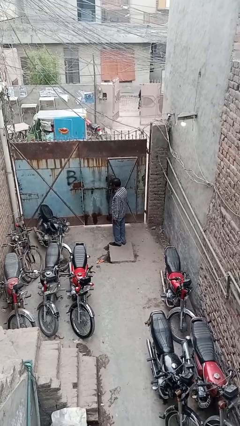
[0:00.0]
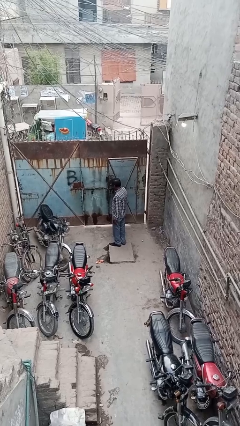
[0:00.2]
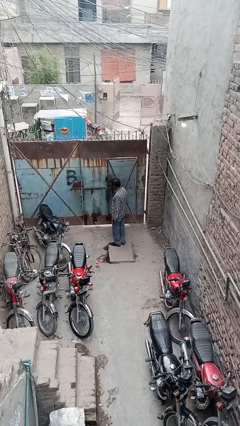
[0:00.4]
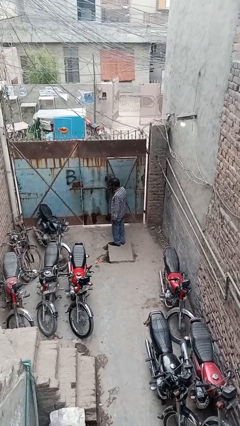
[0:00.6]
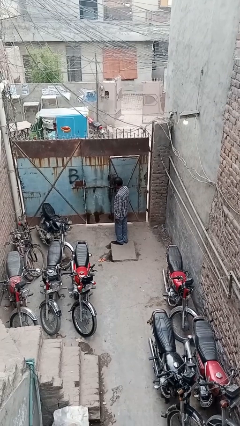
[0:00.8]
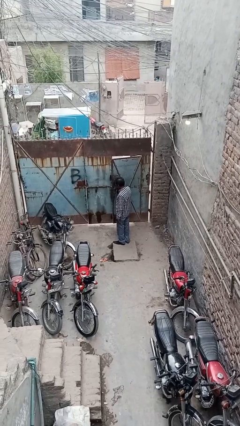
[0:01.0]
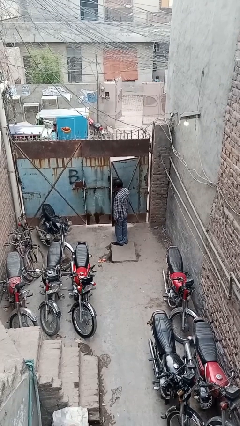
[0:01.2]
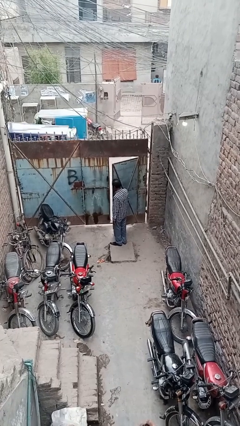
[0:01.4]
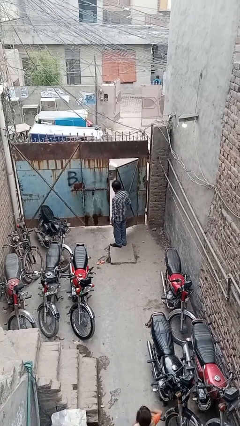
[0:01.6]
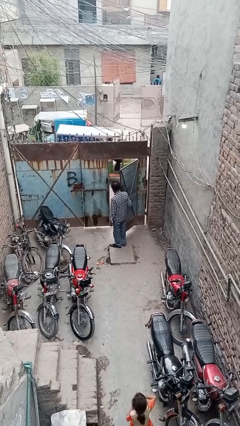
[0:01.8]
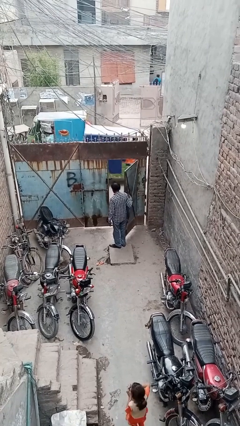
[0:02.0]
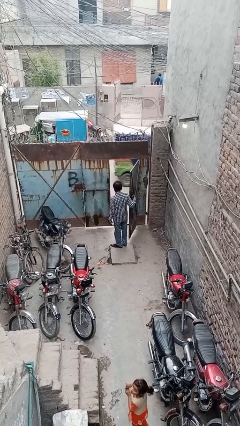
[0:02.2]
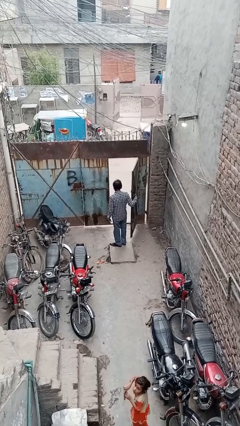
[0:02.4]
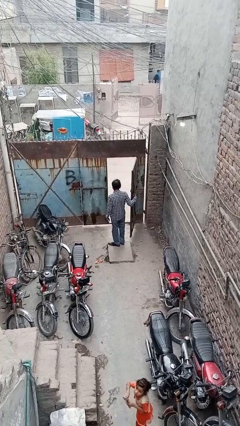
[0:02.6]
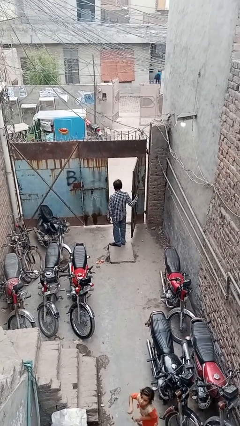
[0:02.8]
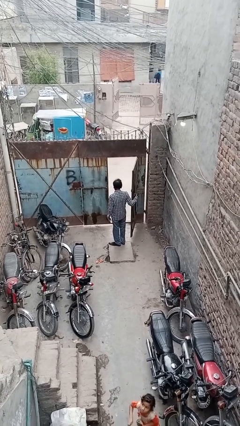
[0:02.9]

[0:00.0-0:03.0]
person opens facility door

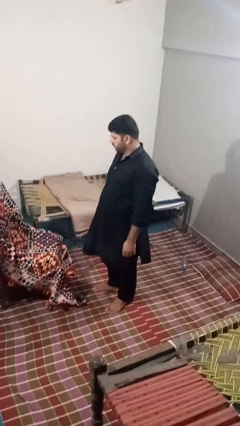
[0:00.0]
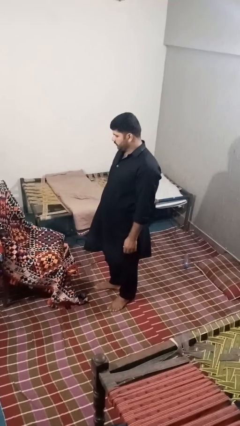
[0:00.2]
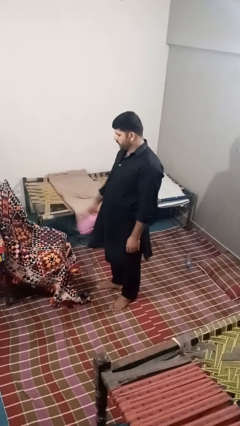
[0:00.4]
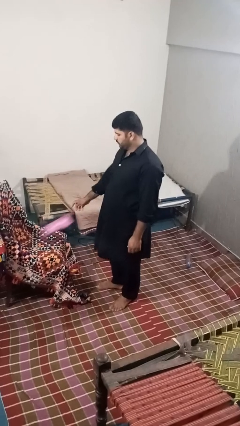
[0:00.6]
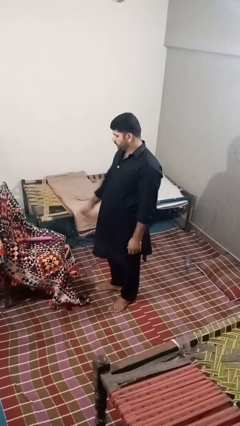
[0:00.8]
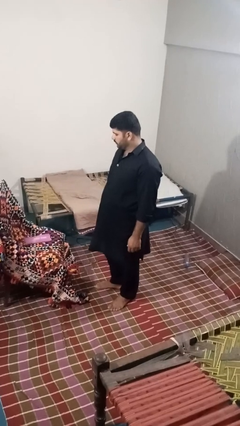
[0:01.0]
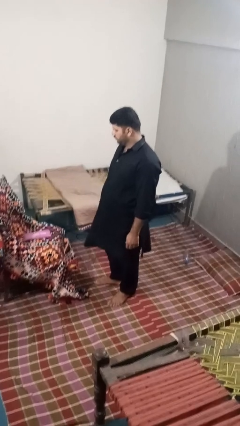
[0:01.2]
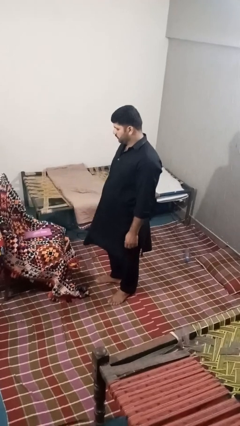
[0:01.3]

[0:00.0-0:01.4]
person puts down object on couch

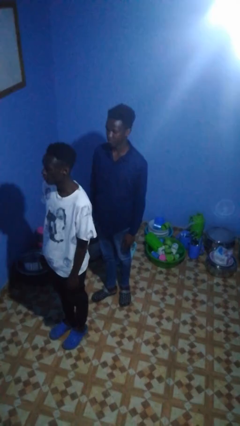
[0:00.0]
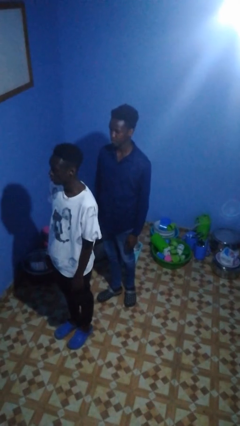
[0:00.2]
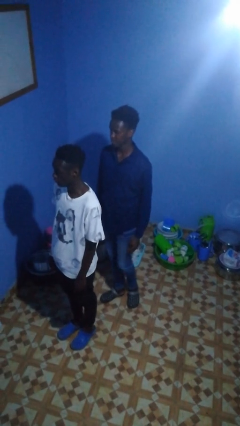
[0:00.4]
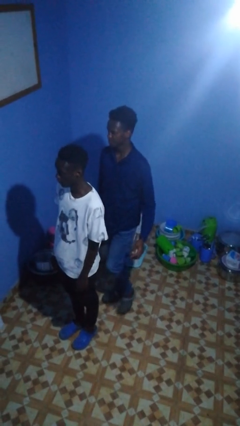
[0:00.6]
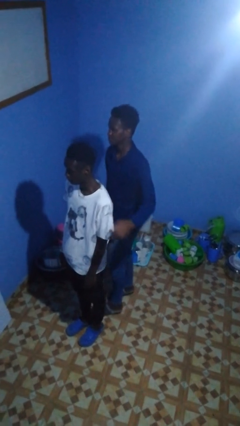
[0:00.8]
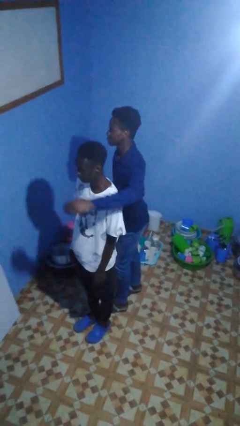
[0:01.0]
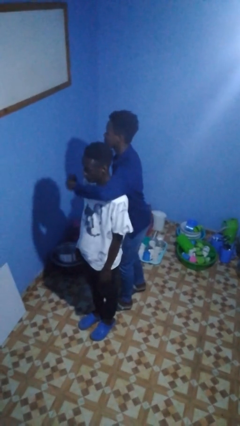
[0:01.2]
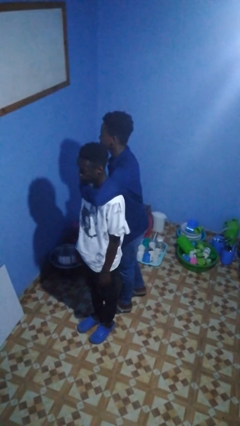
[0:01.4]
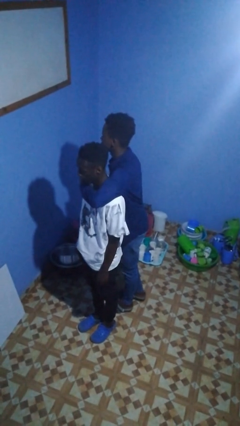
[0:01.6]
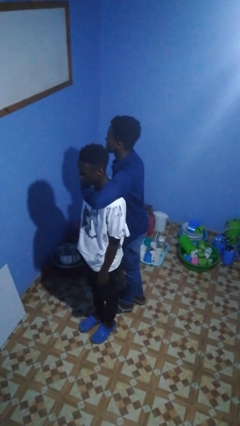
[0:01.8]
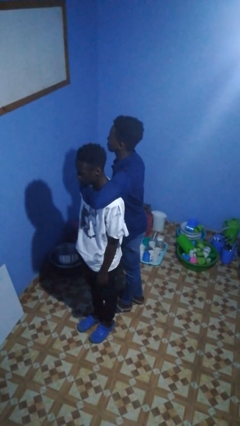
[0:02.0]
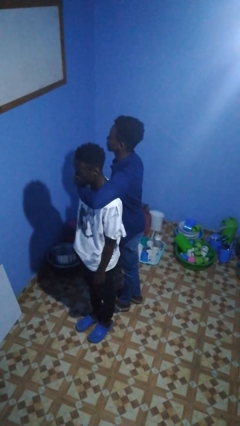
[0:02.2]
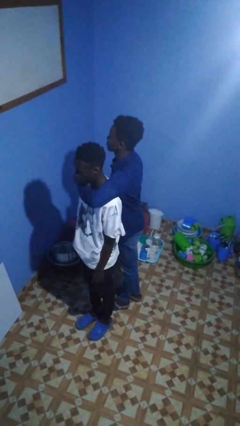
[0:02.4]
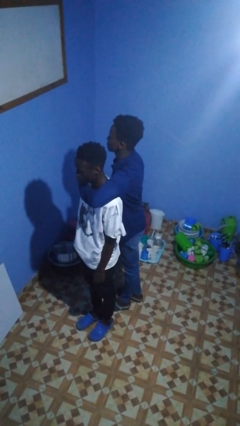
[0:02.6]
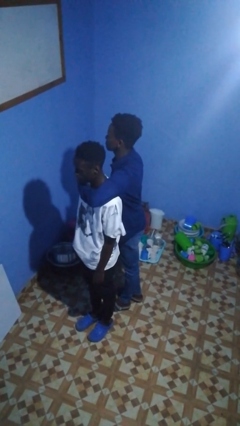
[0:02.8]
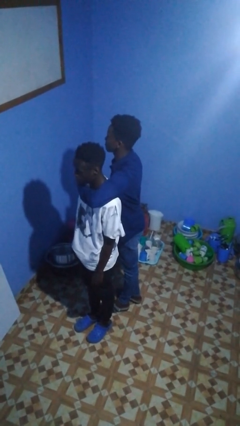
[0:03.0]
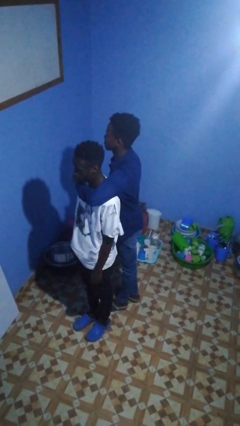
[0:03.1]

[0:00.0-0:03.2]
person hugs person from behind

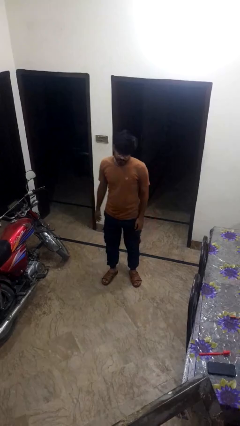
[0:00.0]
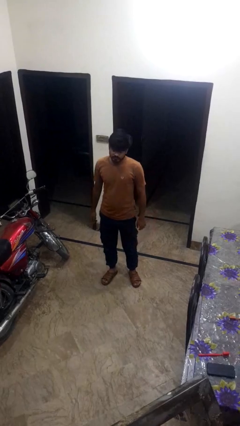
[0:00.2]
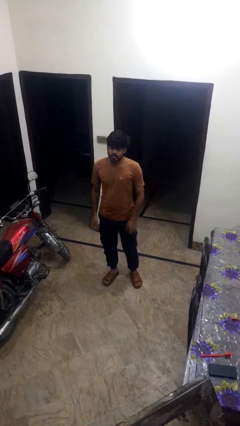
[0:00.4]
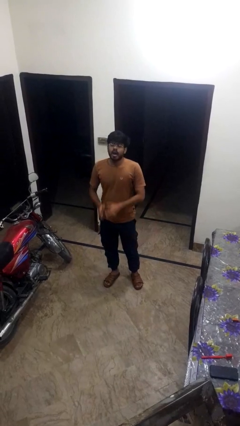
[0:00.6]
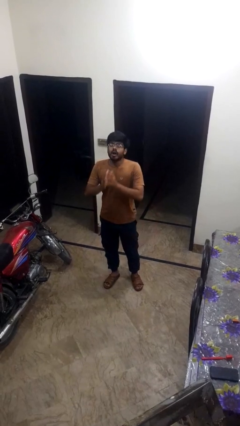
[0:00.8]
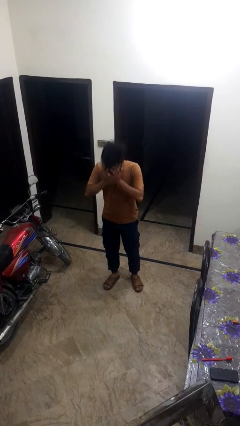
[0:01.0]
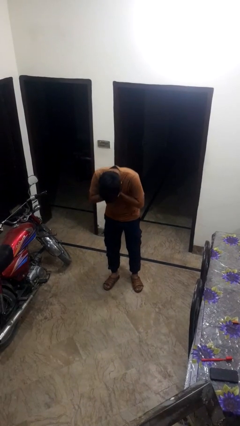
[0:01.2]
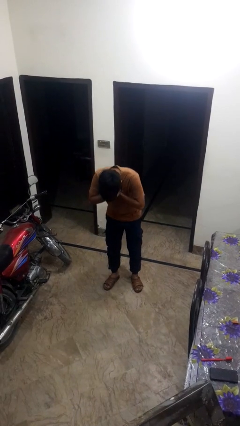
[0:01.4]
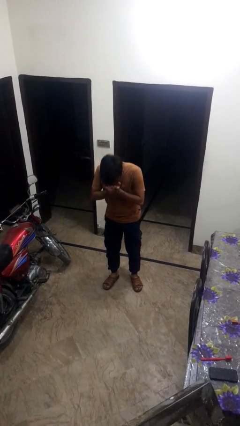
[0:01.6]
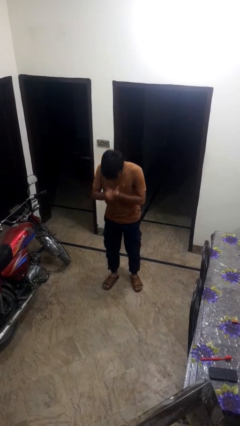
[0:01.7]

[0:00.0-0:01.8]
person sneezes into hand

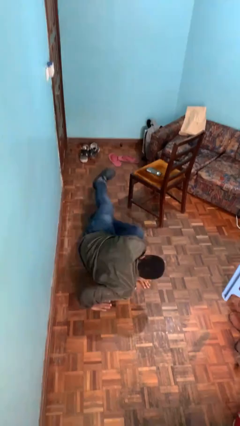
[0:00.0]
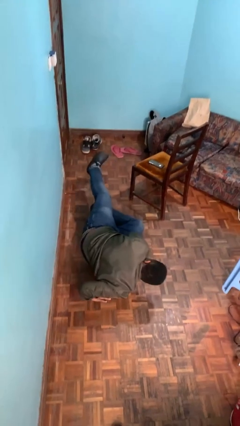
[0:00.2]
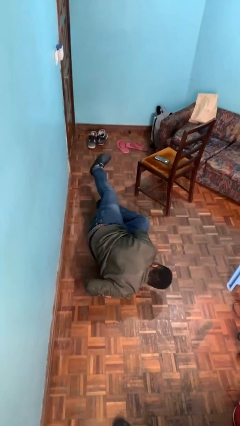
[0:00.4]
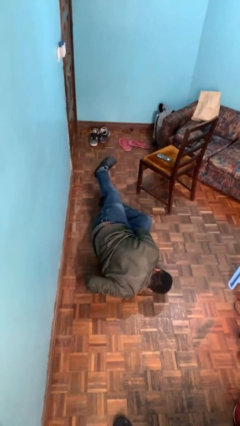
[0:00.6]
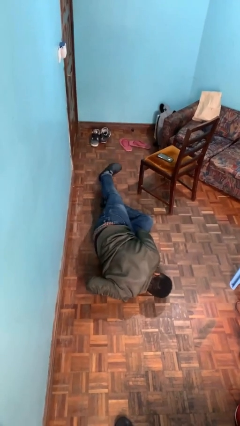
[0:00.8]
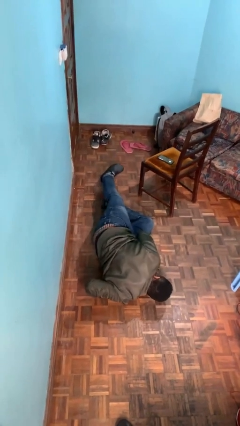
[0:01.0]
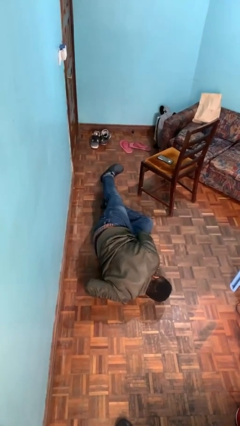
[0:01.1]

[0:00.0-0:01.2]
person lies down on floor

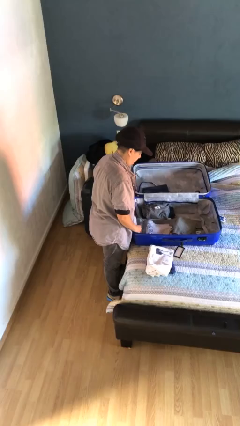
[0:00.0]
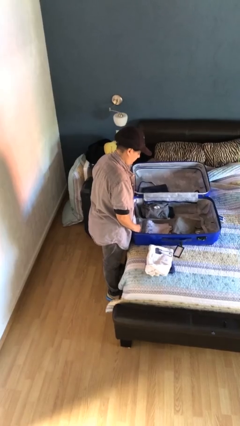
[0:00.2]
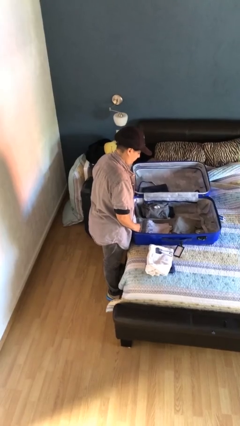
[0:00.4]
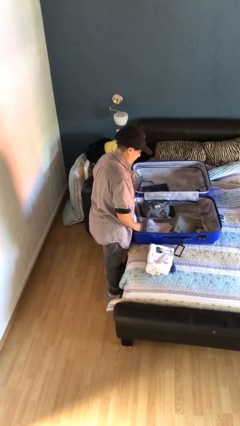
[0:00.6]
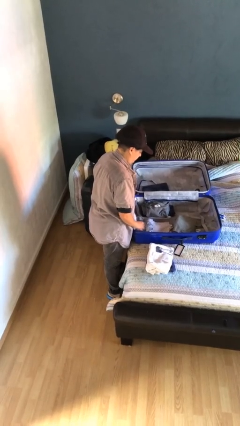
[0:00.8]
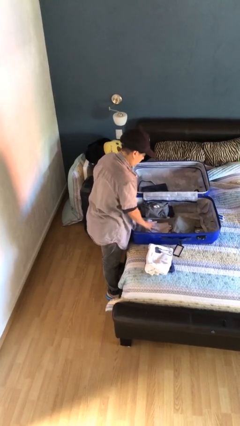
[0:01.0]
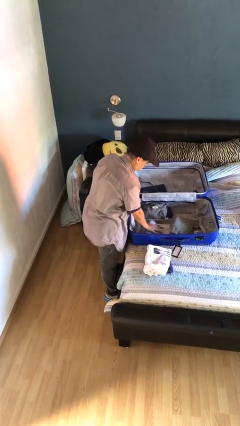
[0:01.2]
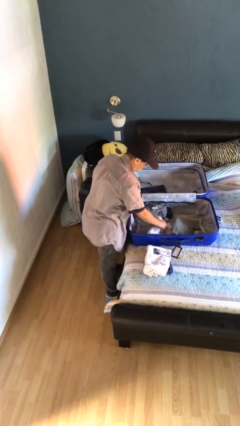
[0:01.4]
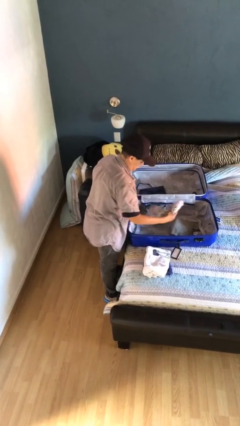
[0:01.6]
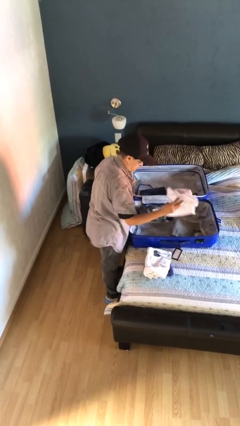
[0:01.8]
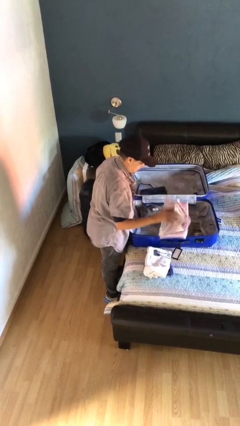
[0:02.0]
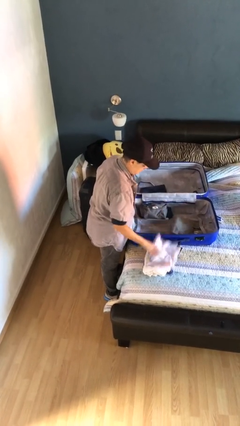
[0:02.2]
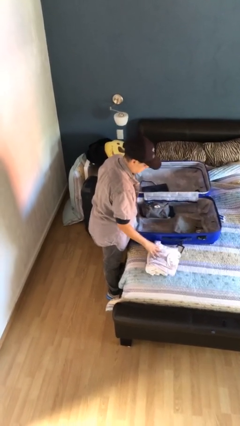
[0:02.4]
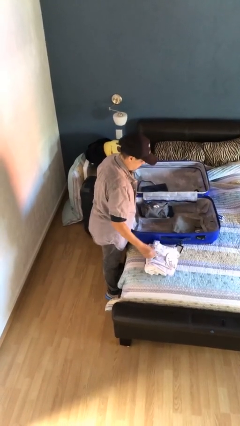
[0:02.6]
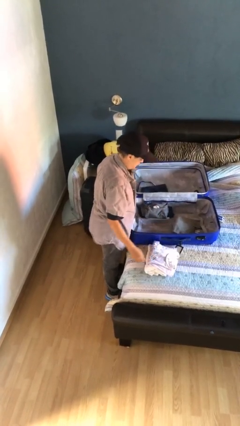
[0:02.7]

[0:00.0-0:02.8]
person unloads clothes from suitcase

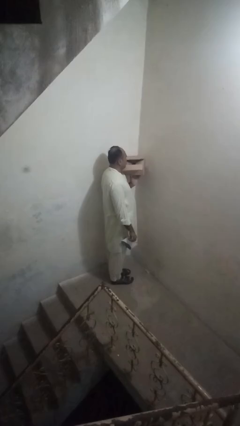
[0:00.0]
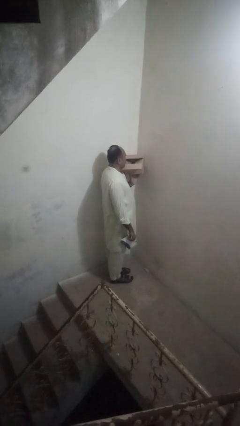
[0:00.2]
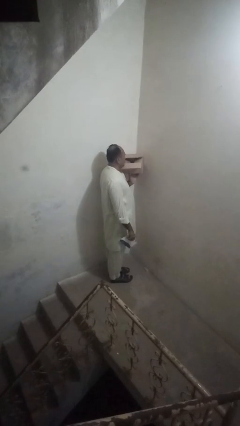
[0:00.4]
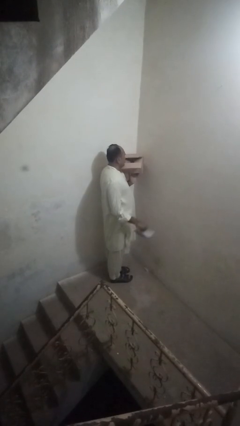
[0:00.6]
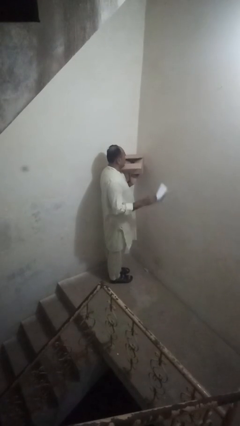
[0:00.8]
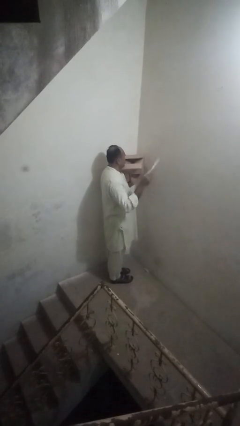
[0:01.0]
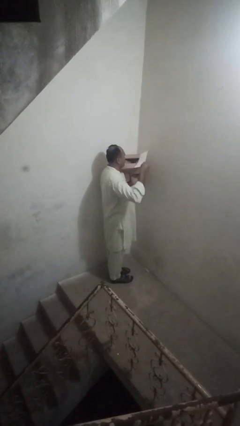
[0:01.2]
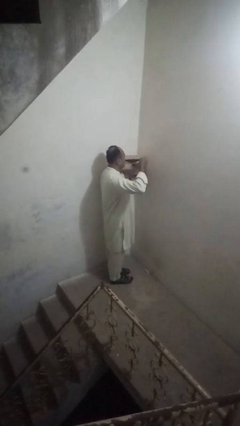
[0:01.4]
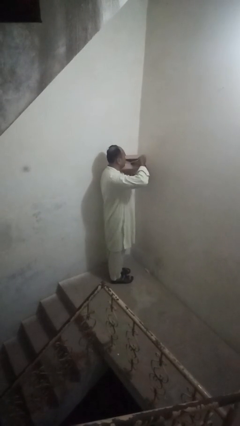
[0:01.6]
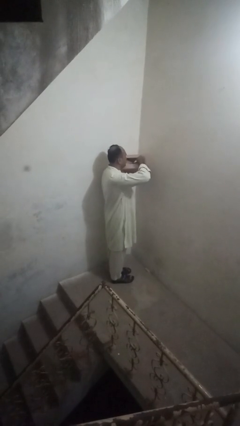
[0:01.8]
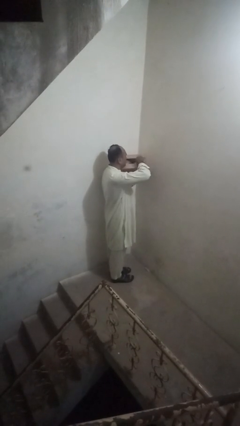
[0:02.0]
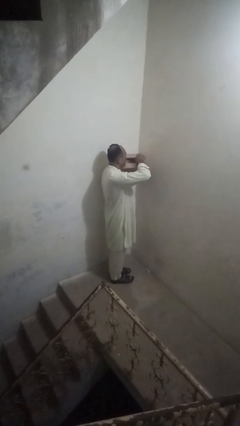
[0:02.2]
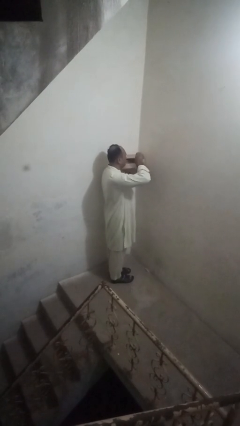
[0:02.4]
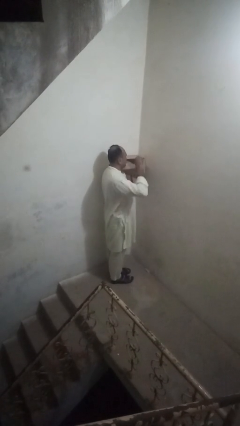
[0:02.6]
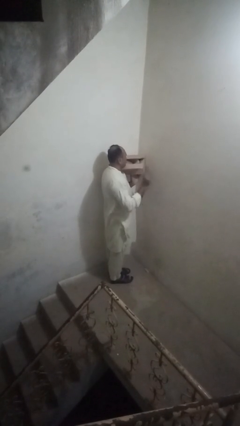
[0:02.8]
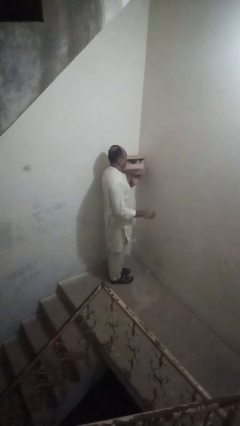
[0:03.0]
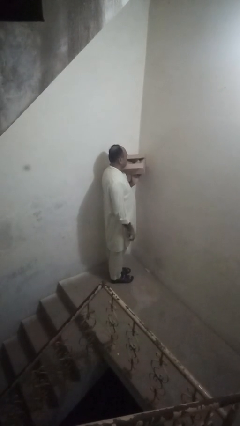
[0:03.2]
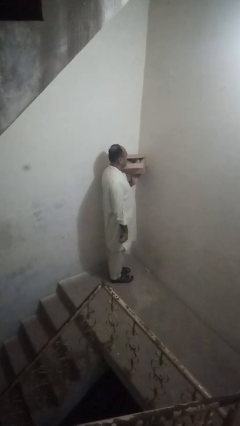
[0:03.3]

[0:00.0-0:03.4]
person puts letters in mailbox

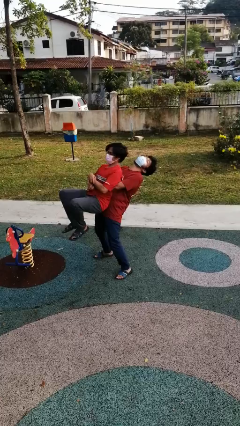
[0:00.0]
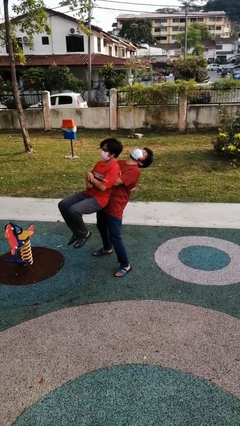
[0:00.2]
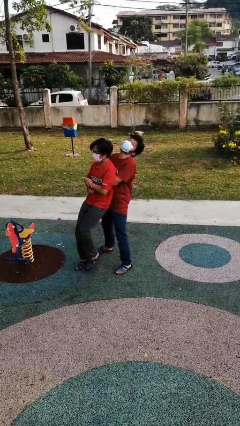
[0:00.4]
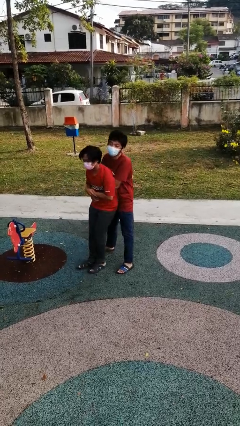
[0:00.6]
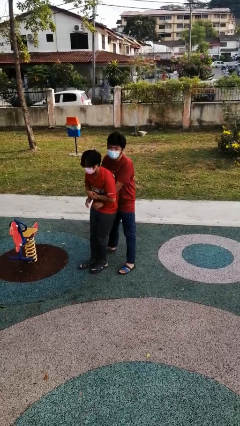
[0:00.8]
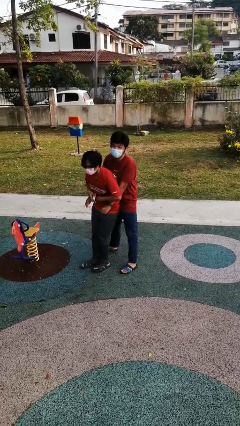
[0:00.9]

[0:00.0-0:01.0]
person puts down person
